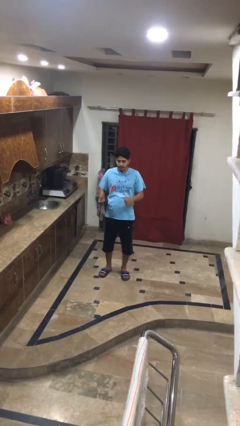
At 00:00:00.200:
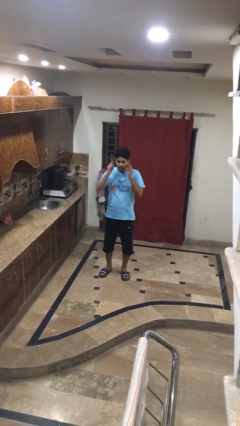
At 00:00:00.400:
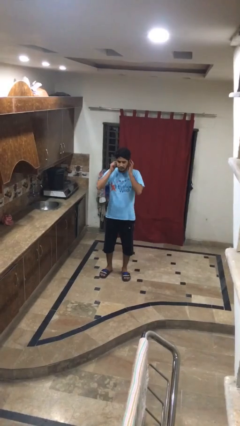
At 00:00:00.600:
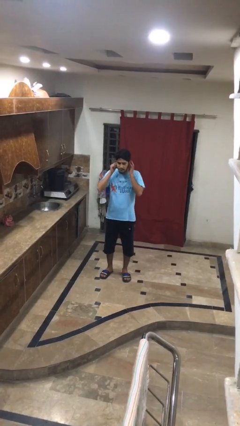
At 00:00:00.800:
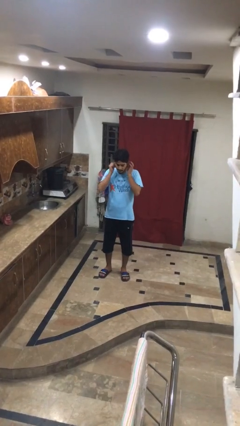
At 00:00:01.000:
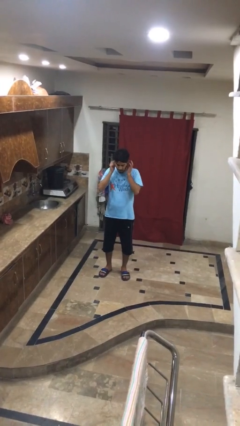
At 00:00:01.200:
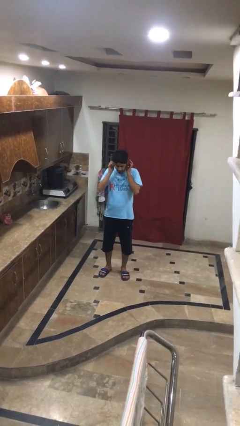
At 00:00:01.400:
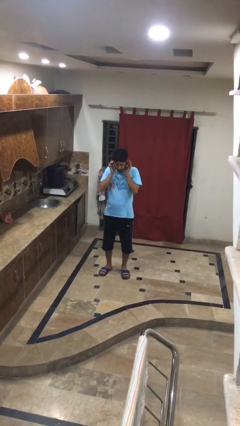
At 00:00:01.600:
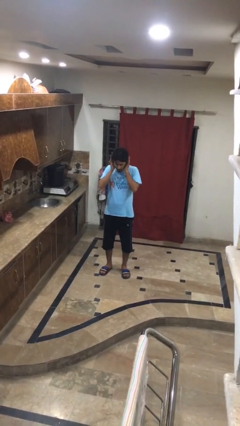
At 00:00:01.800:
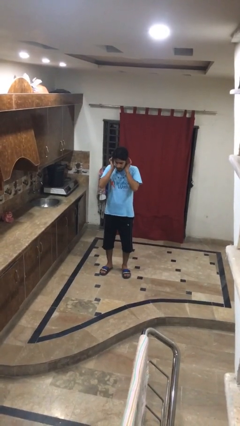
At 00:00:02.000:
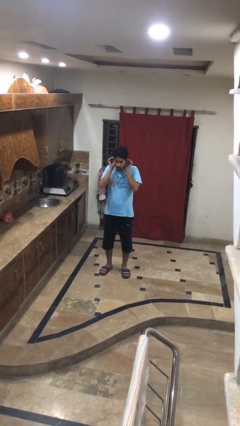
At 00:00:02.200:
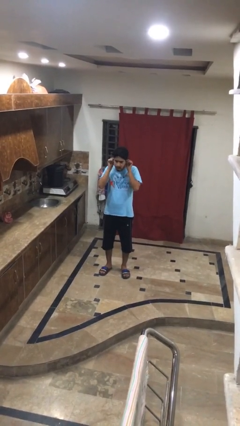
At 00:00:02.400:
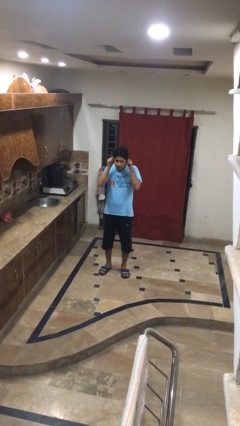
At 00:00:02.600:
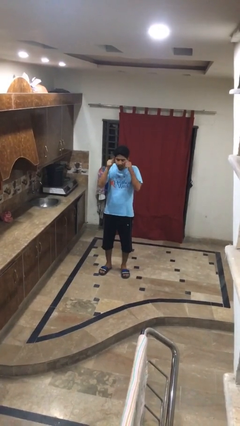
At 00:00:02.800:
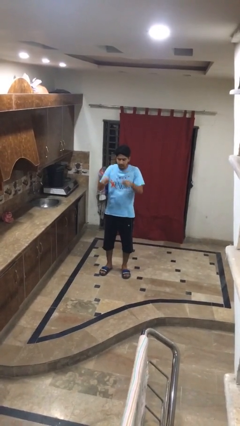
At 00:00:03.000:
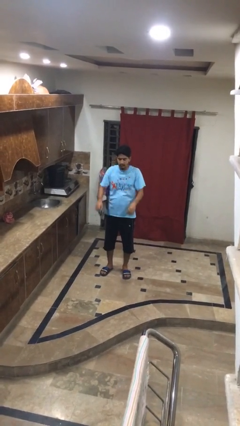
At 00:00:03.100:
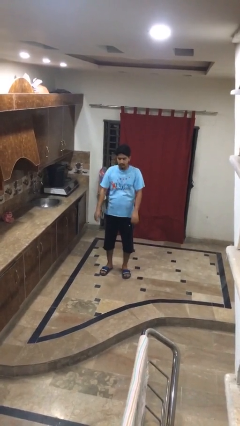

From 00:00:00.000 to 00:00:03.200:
person touches earlobe

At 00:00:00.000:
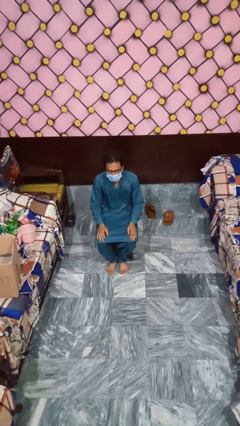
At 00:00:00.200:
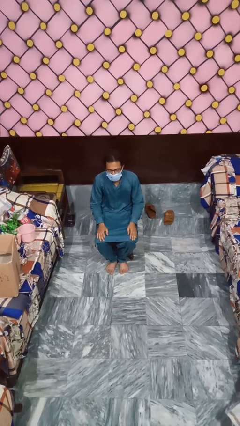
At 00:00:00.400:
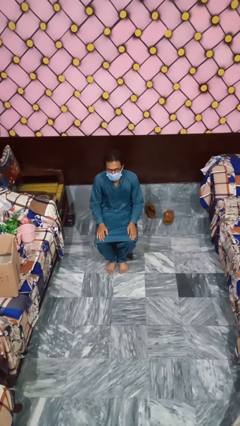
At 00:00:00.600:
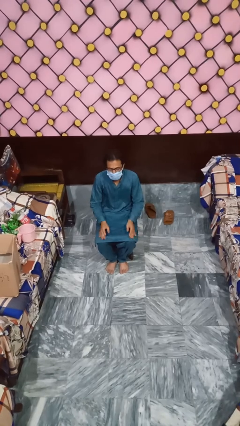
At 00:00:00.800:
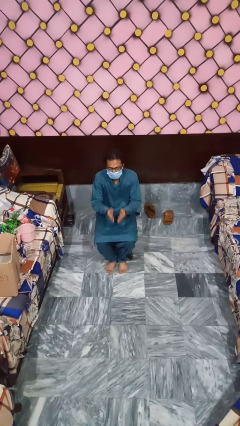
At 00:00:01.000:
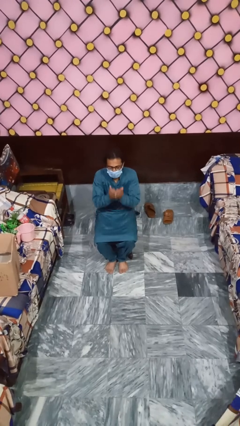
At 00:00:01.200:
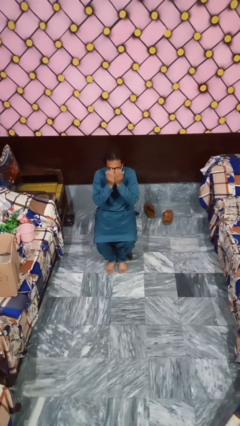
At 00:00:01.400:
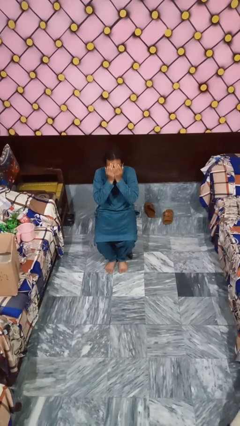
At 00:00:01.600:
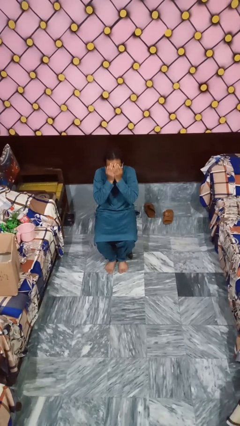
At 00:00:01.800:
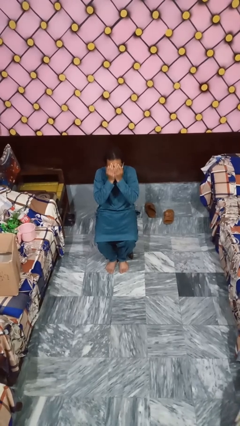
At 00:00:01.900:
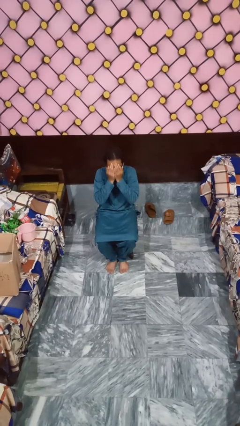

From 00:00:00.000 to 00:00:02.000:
person covers face with hands

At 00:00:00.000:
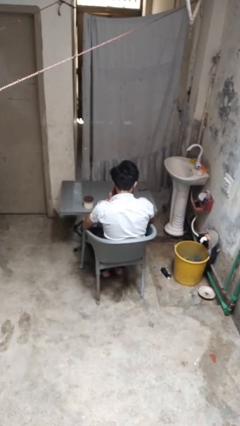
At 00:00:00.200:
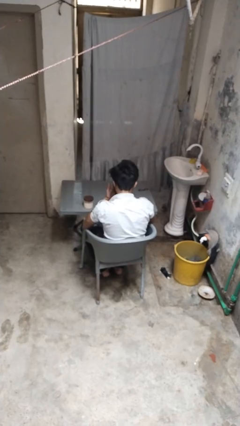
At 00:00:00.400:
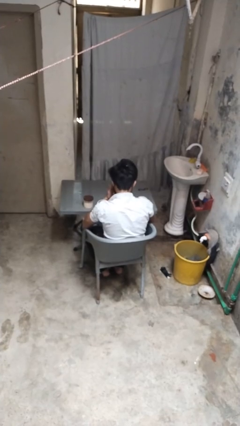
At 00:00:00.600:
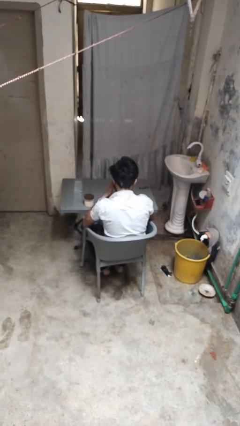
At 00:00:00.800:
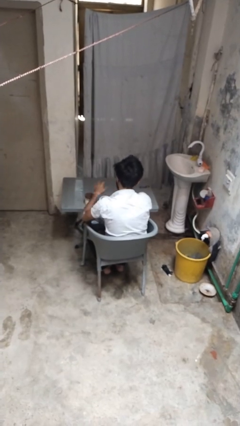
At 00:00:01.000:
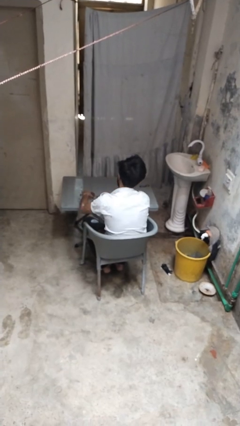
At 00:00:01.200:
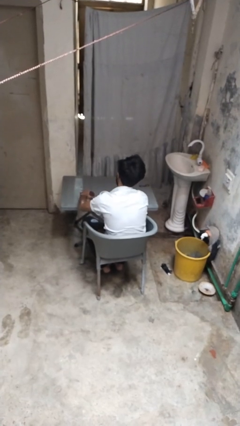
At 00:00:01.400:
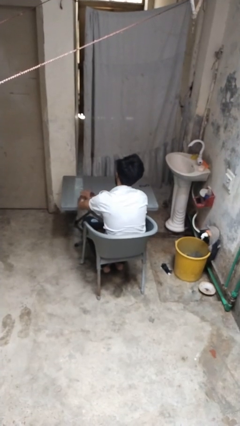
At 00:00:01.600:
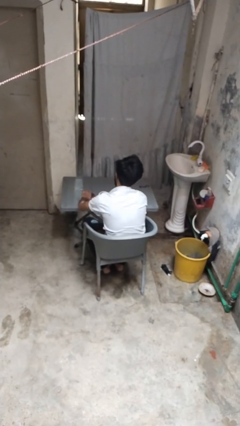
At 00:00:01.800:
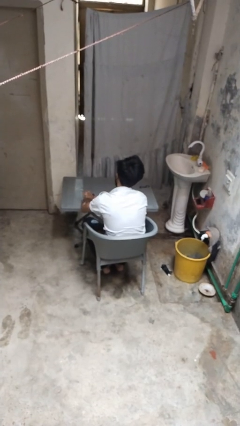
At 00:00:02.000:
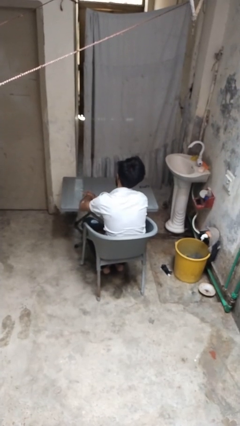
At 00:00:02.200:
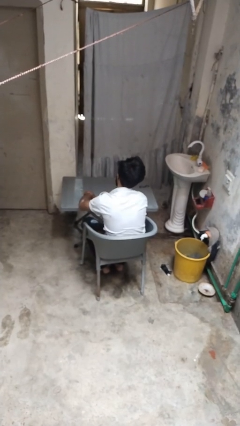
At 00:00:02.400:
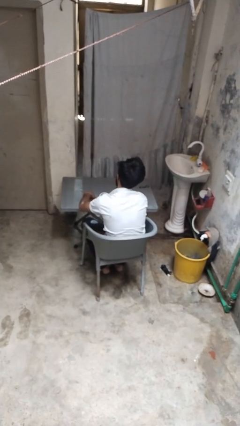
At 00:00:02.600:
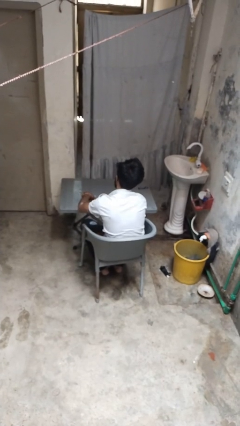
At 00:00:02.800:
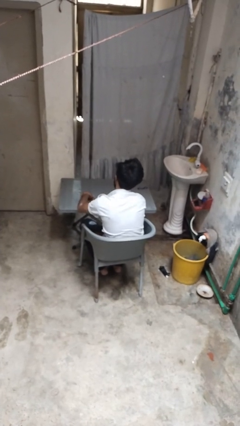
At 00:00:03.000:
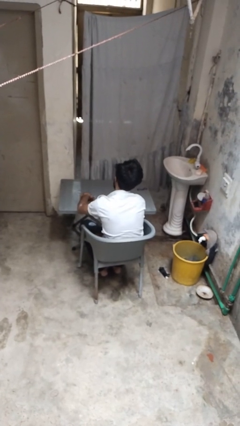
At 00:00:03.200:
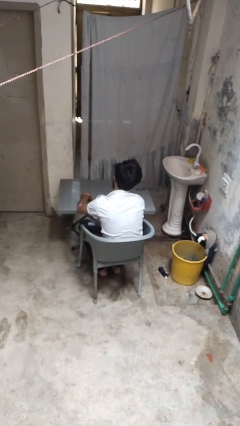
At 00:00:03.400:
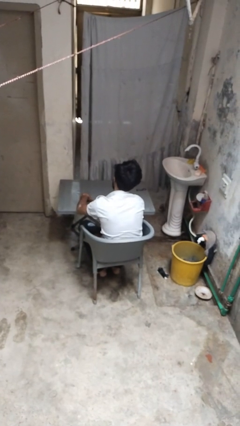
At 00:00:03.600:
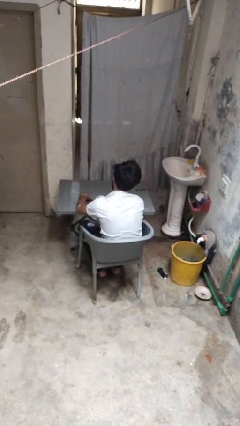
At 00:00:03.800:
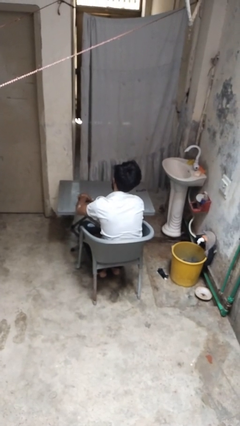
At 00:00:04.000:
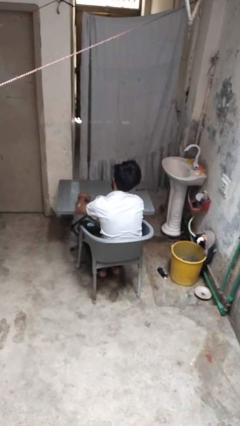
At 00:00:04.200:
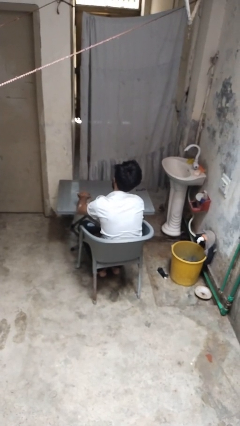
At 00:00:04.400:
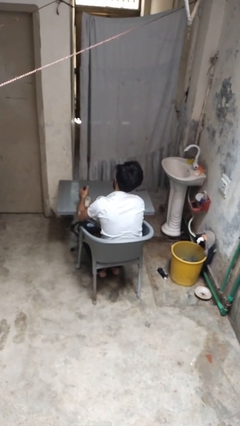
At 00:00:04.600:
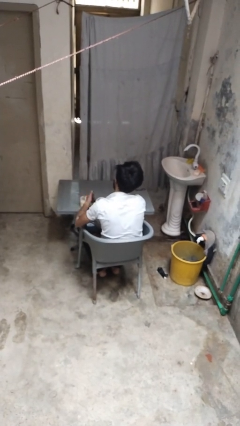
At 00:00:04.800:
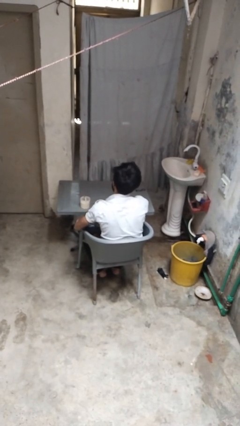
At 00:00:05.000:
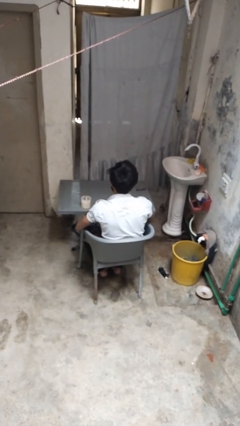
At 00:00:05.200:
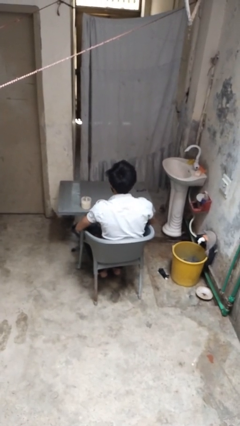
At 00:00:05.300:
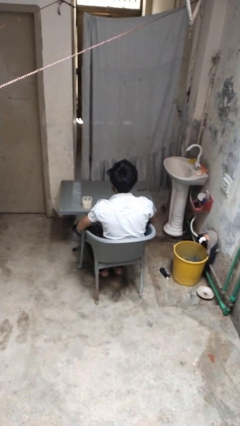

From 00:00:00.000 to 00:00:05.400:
person opens jar

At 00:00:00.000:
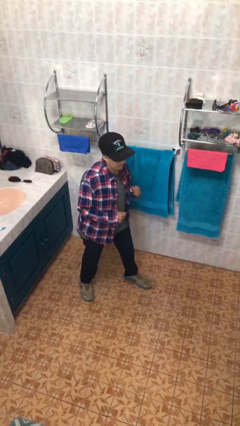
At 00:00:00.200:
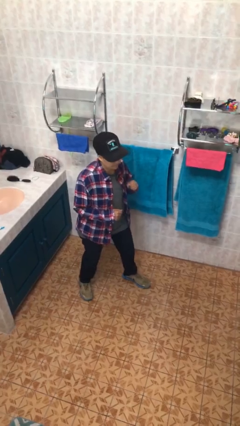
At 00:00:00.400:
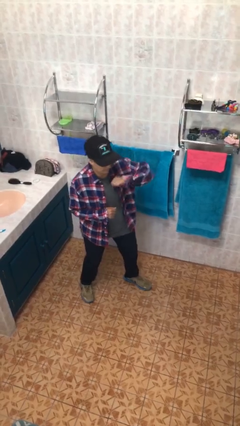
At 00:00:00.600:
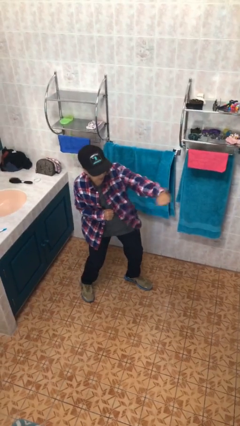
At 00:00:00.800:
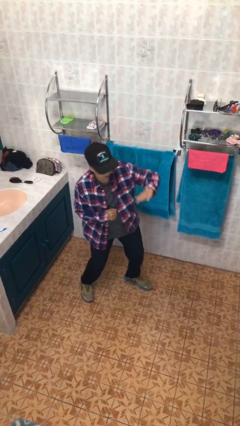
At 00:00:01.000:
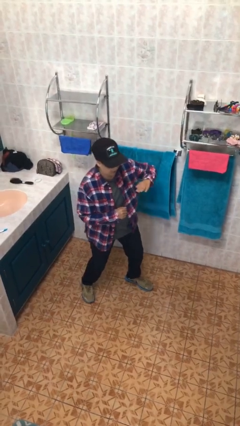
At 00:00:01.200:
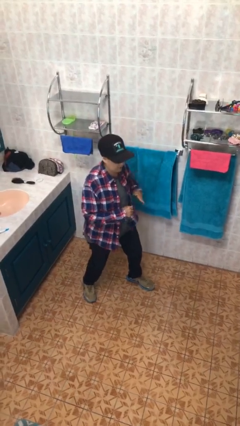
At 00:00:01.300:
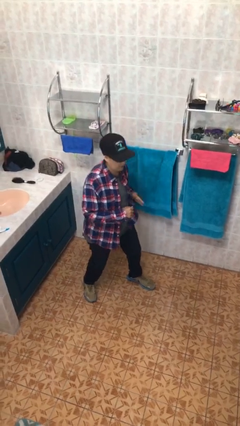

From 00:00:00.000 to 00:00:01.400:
person karate chop

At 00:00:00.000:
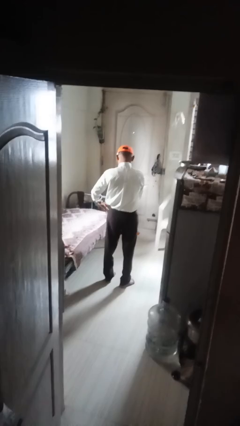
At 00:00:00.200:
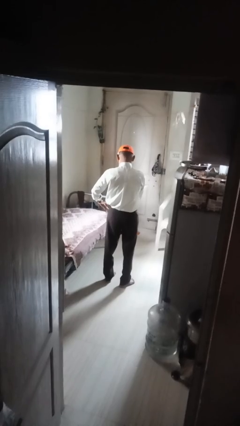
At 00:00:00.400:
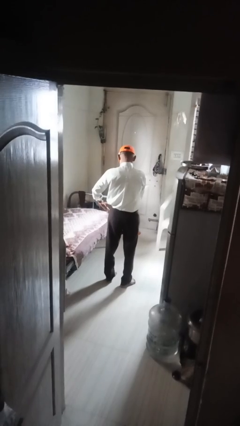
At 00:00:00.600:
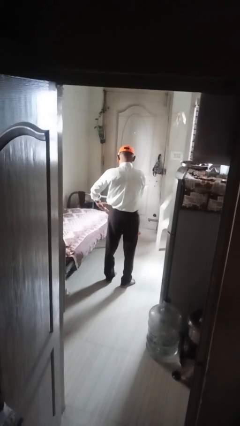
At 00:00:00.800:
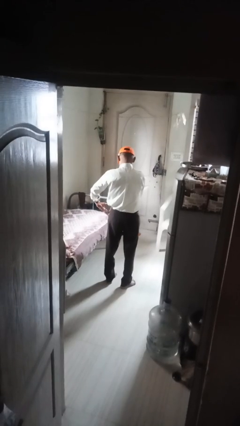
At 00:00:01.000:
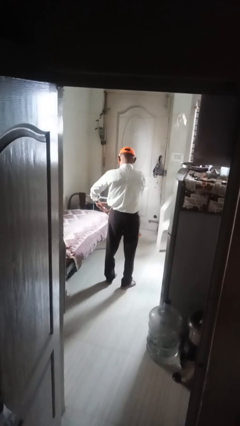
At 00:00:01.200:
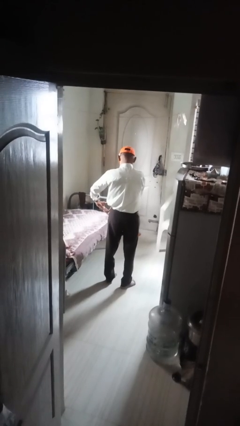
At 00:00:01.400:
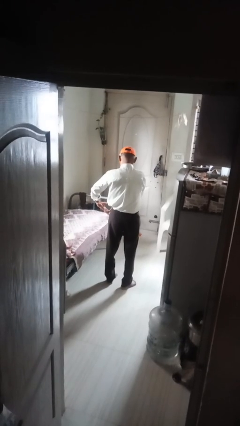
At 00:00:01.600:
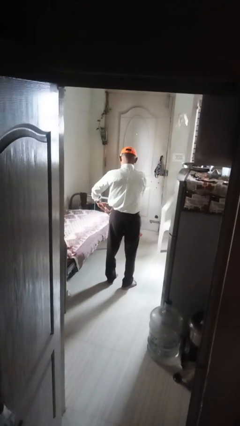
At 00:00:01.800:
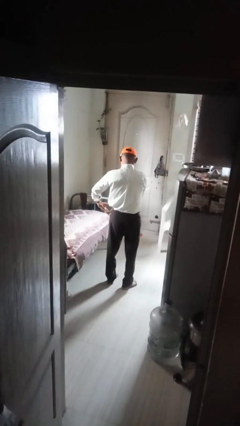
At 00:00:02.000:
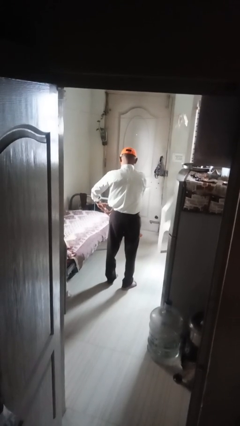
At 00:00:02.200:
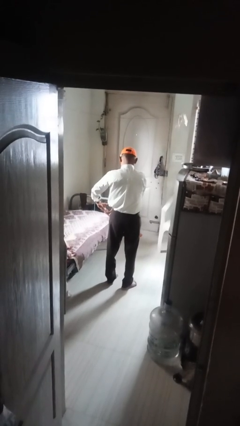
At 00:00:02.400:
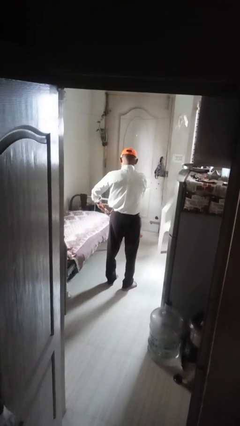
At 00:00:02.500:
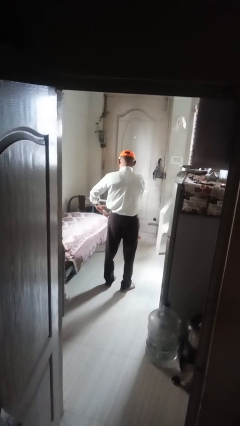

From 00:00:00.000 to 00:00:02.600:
person gestures heart

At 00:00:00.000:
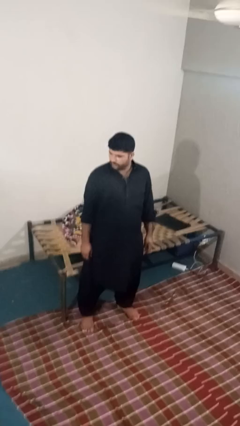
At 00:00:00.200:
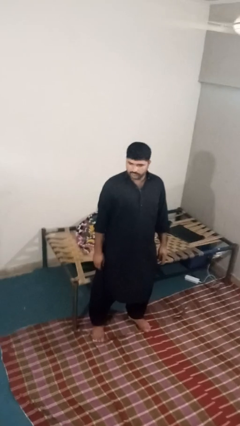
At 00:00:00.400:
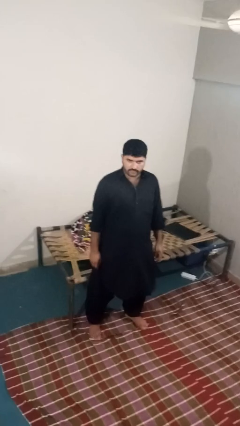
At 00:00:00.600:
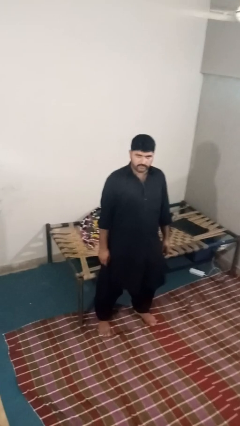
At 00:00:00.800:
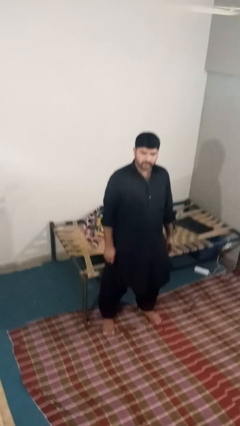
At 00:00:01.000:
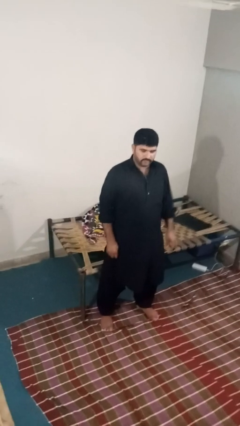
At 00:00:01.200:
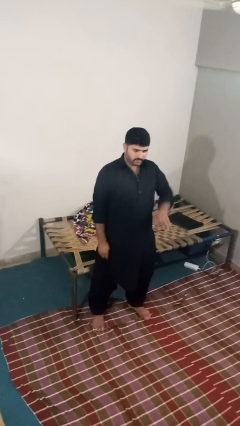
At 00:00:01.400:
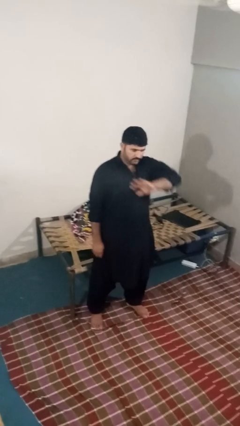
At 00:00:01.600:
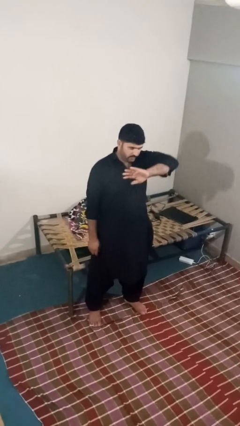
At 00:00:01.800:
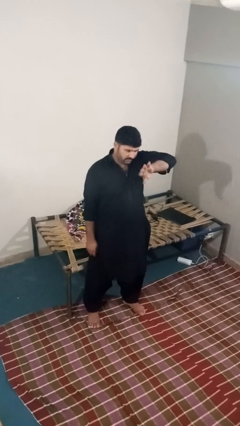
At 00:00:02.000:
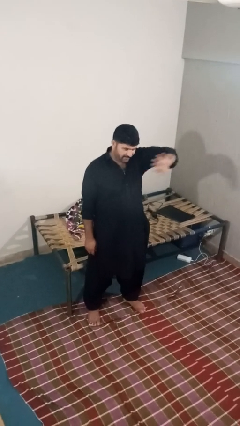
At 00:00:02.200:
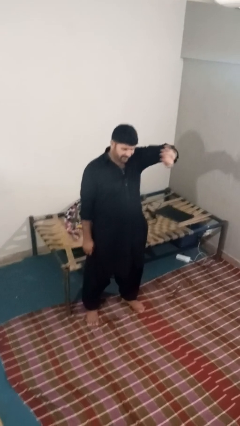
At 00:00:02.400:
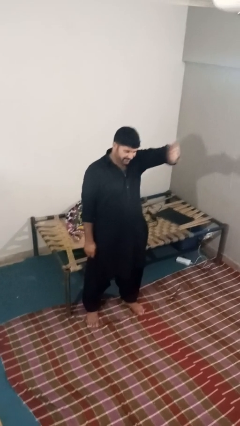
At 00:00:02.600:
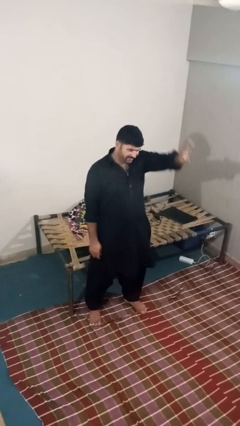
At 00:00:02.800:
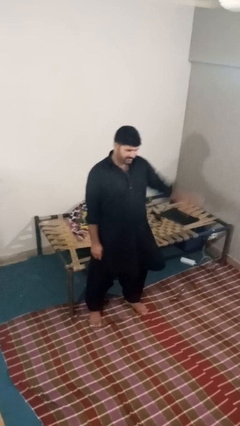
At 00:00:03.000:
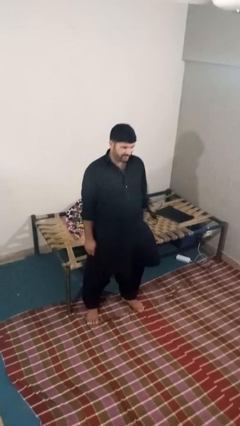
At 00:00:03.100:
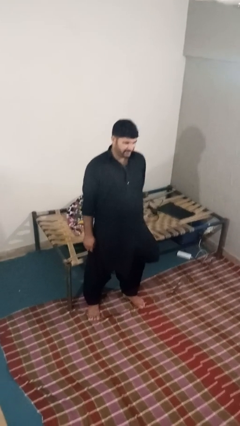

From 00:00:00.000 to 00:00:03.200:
person gestures swipe left
